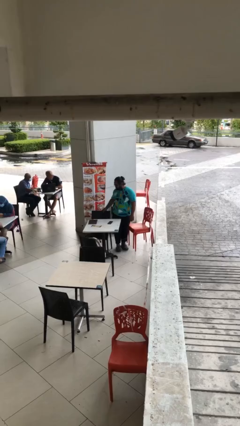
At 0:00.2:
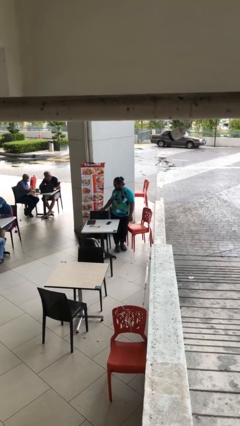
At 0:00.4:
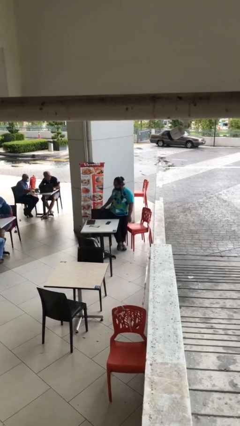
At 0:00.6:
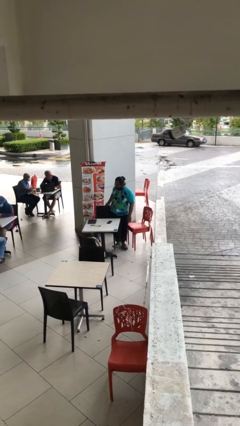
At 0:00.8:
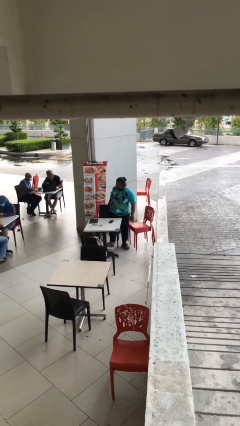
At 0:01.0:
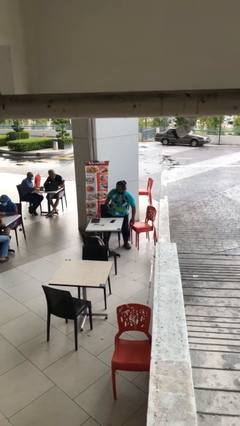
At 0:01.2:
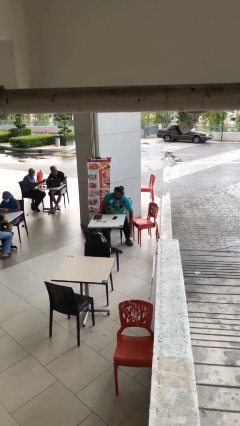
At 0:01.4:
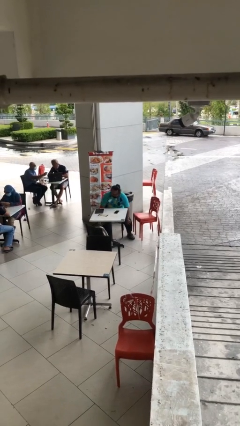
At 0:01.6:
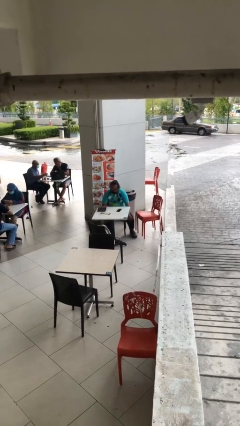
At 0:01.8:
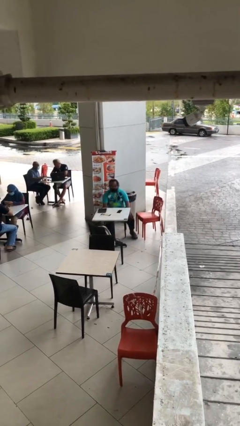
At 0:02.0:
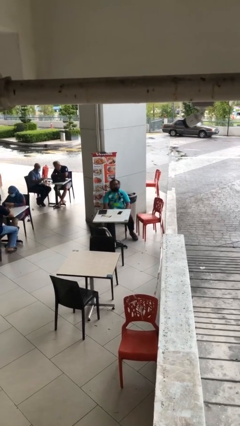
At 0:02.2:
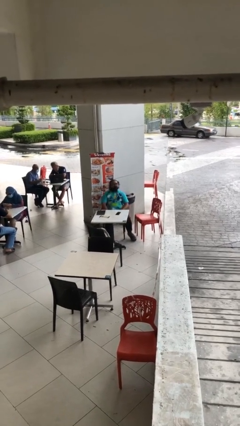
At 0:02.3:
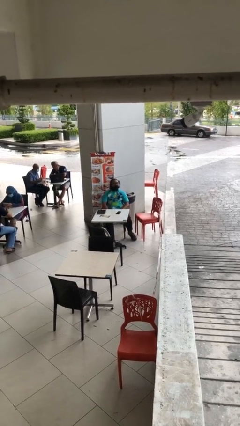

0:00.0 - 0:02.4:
person sits down

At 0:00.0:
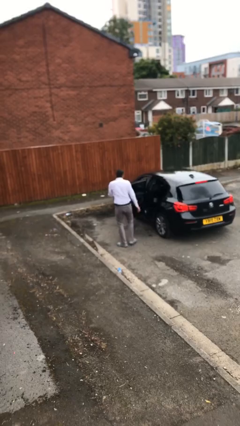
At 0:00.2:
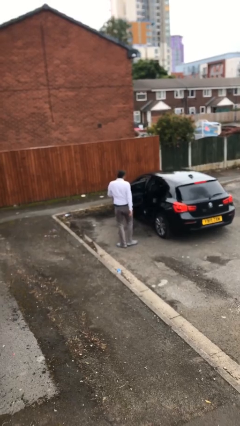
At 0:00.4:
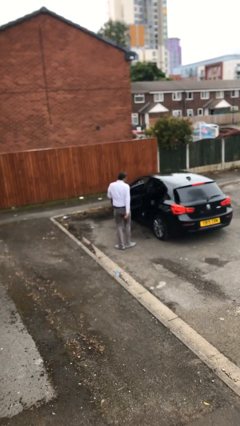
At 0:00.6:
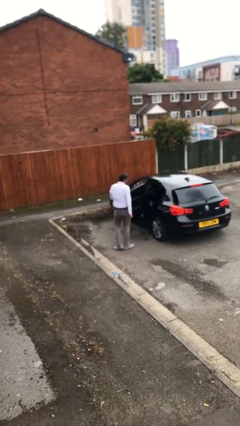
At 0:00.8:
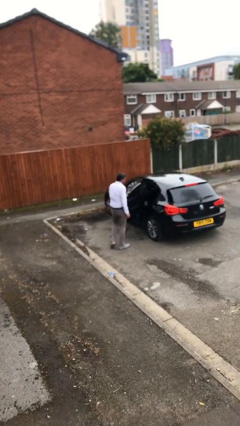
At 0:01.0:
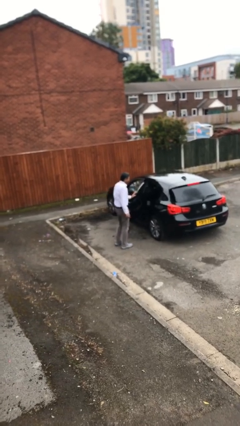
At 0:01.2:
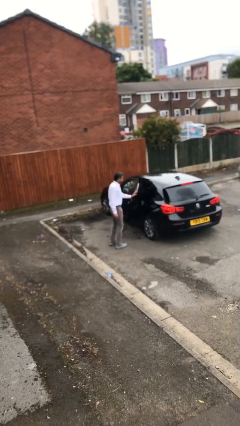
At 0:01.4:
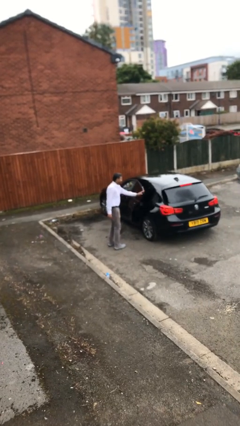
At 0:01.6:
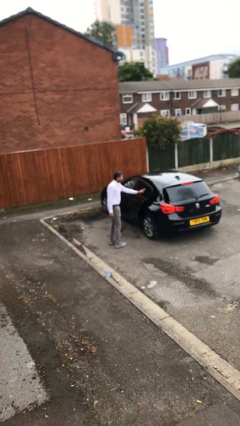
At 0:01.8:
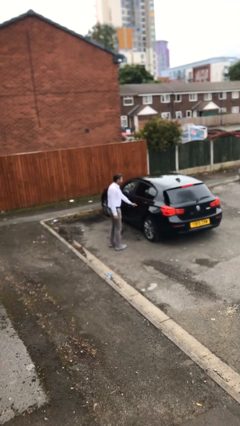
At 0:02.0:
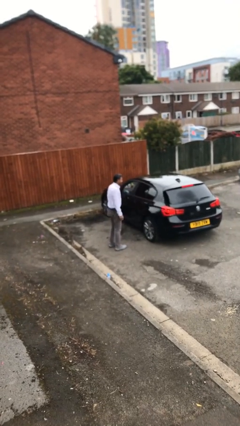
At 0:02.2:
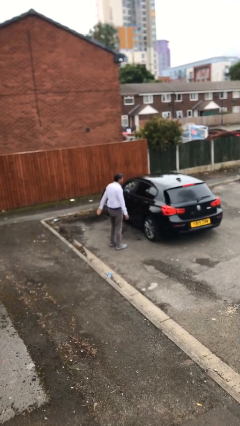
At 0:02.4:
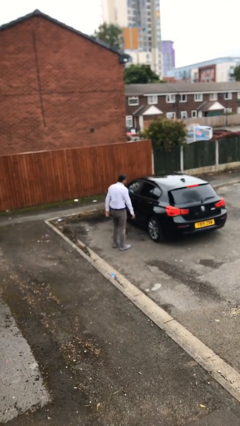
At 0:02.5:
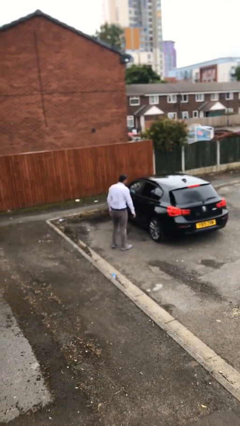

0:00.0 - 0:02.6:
person closes car door

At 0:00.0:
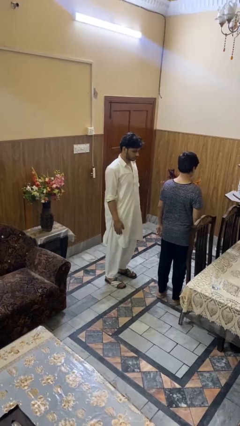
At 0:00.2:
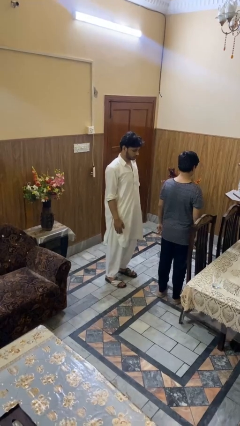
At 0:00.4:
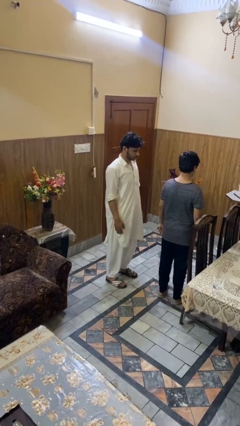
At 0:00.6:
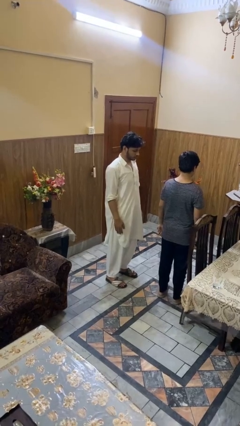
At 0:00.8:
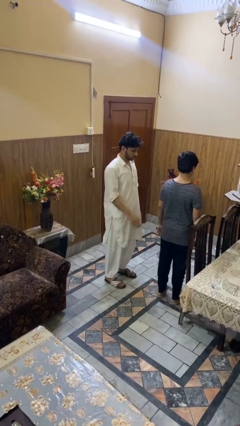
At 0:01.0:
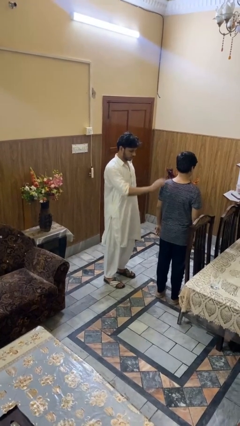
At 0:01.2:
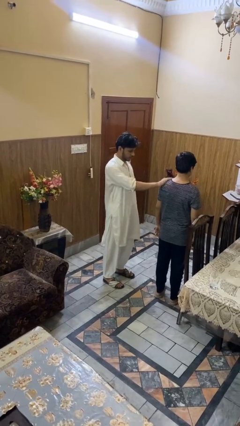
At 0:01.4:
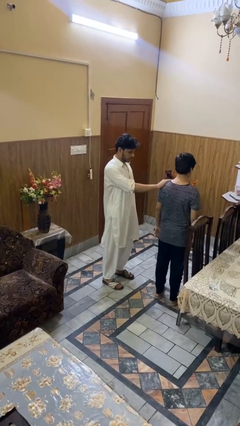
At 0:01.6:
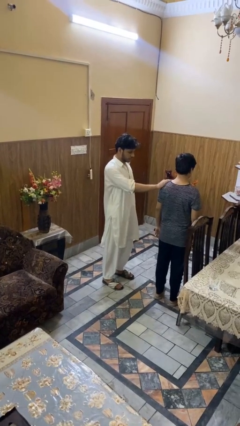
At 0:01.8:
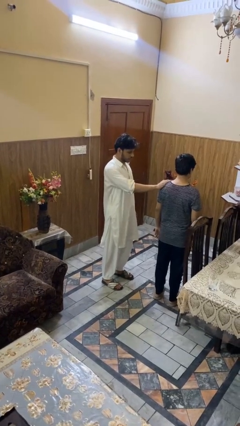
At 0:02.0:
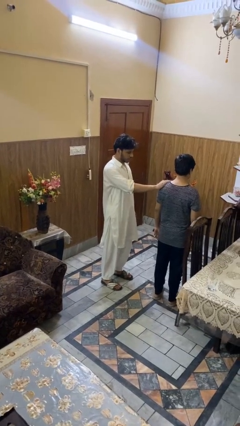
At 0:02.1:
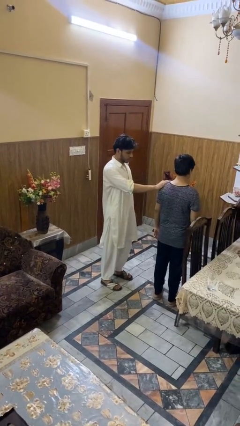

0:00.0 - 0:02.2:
person grabs person by shoulder

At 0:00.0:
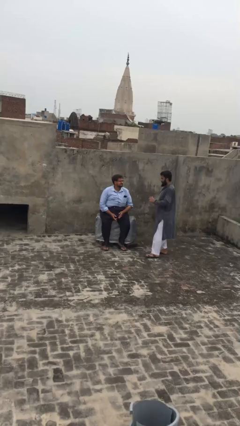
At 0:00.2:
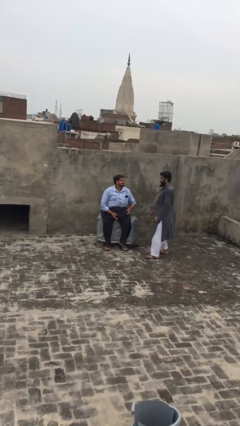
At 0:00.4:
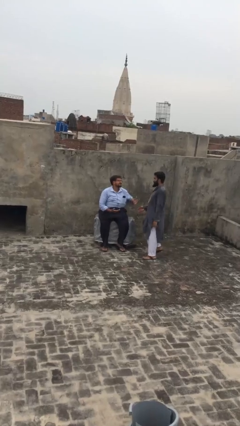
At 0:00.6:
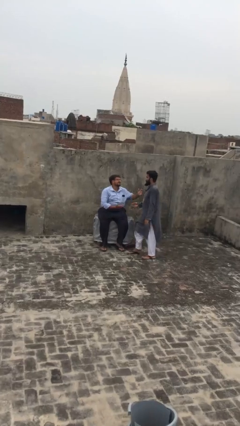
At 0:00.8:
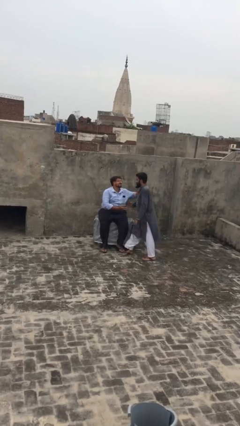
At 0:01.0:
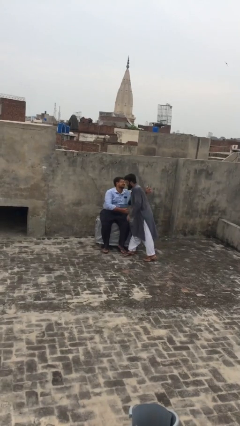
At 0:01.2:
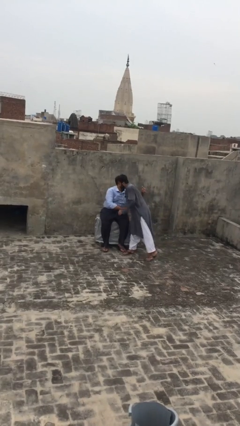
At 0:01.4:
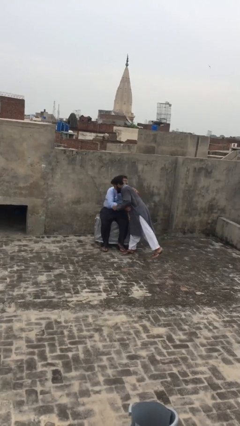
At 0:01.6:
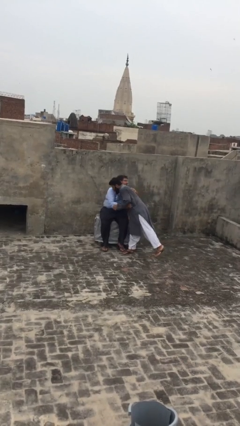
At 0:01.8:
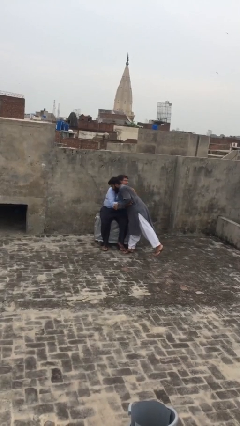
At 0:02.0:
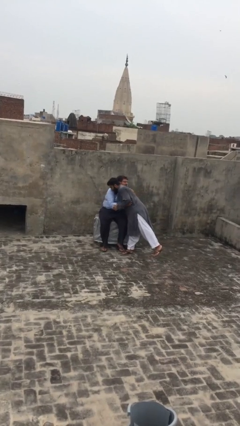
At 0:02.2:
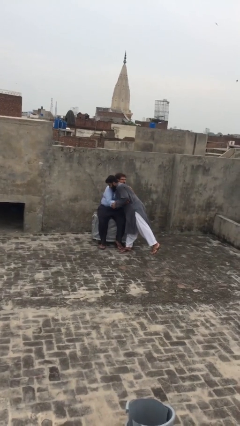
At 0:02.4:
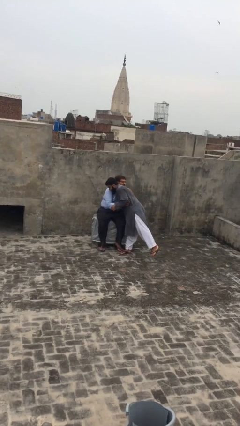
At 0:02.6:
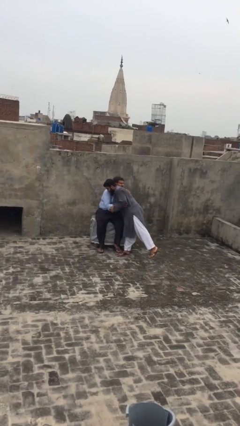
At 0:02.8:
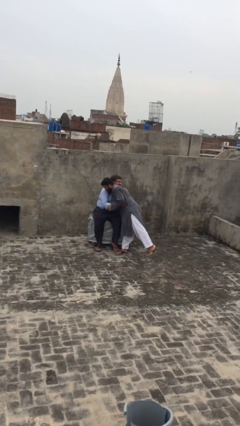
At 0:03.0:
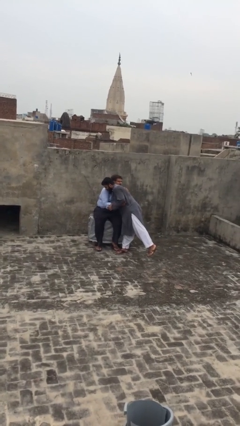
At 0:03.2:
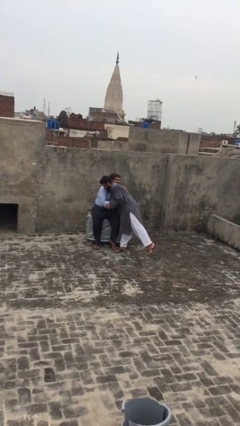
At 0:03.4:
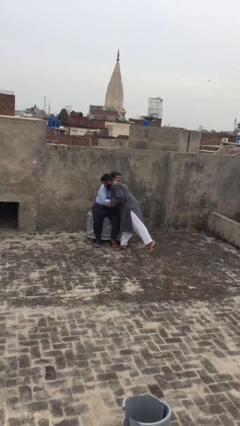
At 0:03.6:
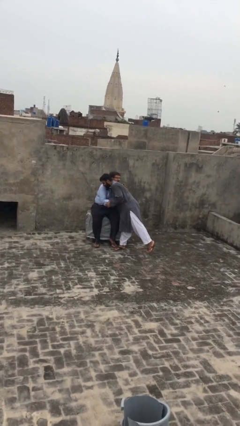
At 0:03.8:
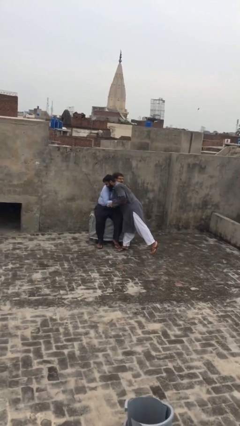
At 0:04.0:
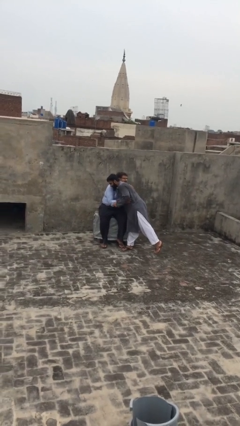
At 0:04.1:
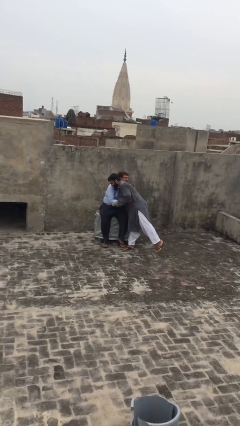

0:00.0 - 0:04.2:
person embraces person

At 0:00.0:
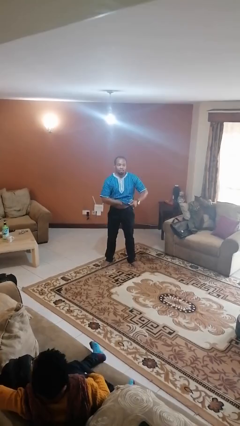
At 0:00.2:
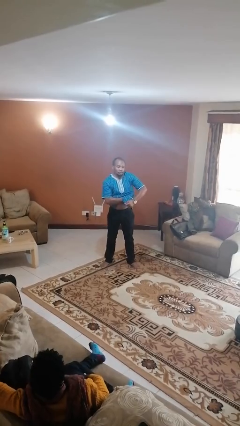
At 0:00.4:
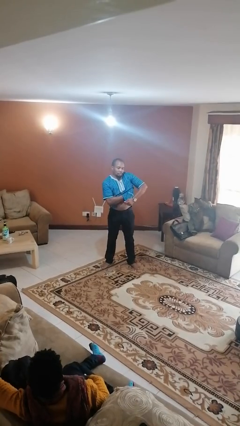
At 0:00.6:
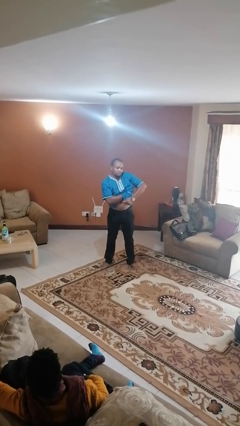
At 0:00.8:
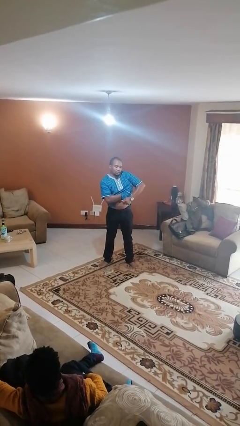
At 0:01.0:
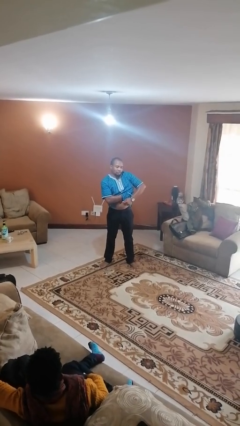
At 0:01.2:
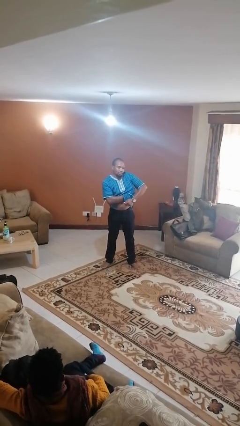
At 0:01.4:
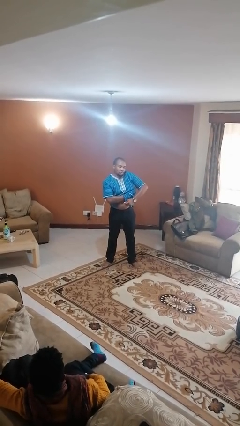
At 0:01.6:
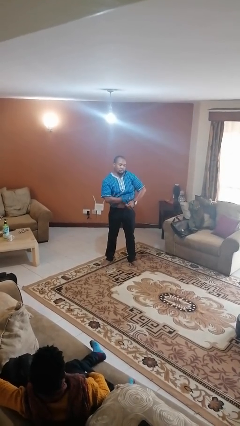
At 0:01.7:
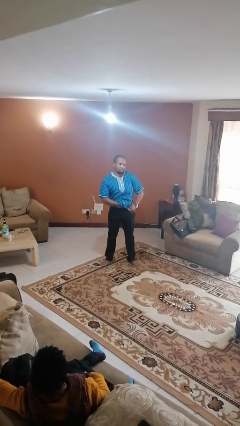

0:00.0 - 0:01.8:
person applies deodorant

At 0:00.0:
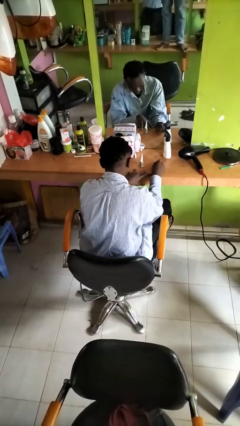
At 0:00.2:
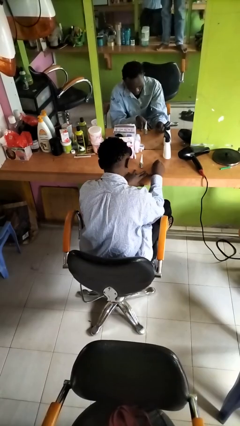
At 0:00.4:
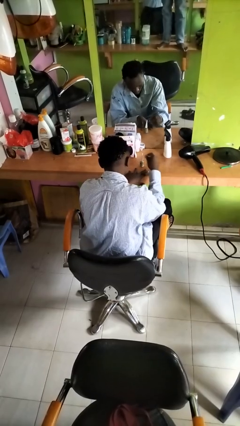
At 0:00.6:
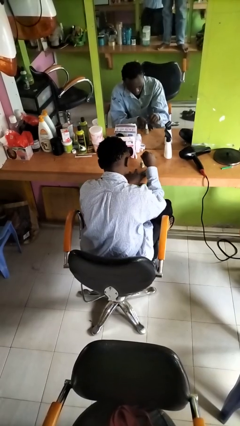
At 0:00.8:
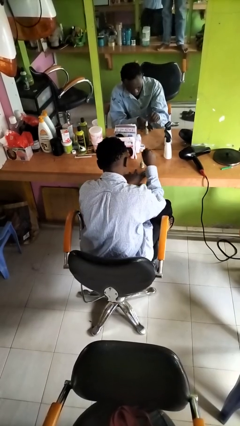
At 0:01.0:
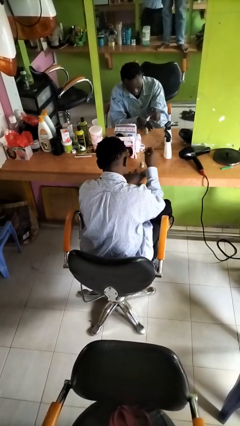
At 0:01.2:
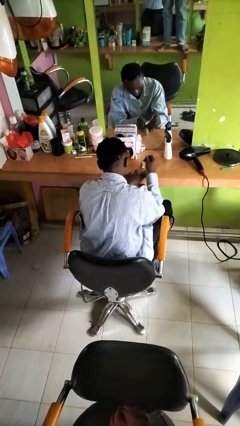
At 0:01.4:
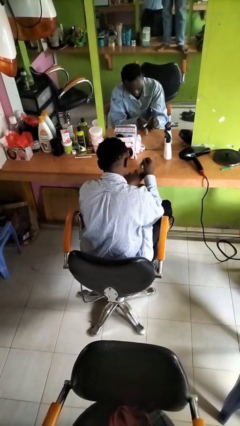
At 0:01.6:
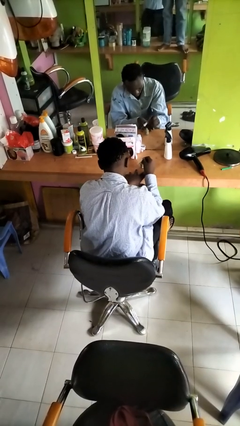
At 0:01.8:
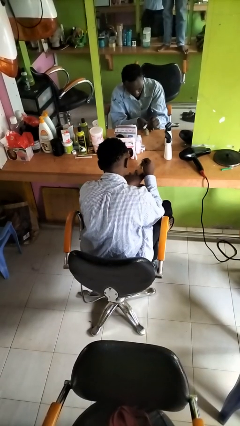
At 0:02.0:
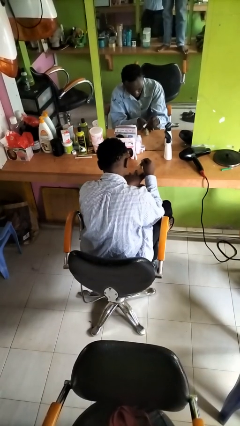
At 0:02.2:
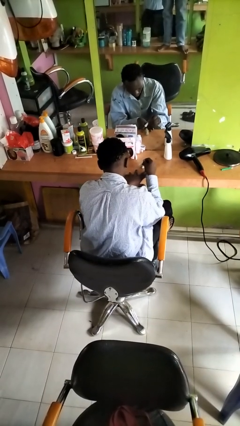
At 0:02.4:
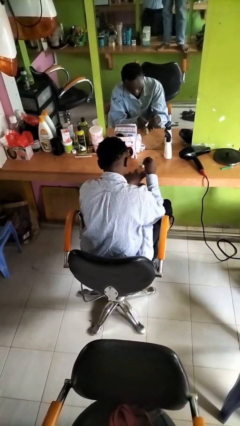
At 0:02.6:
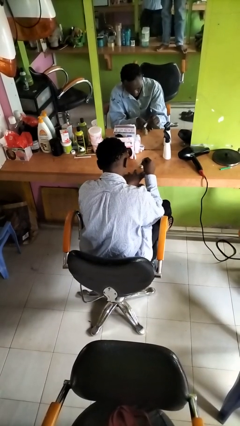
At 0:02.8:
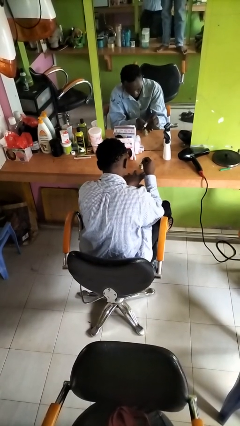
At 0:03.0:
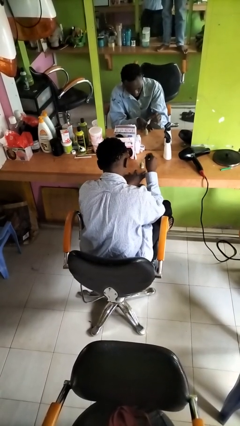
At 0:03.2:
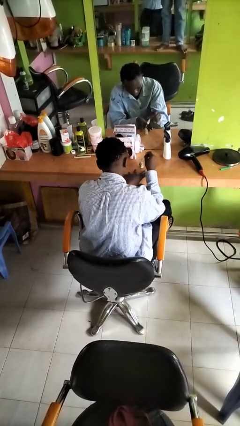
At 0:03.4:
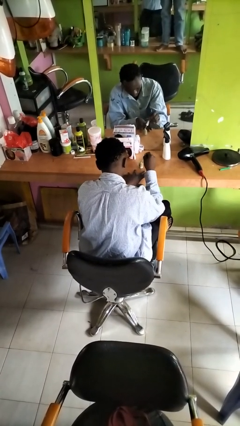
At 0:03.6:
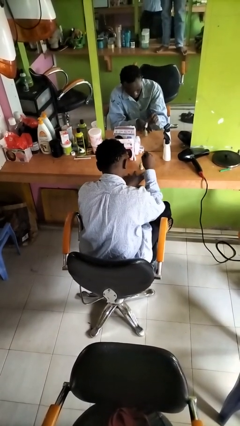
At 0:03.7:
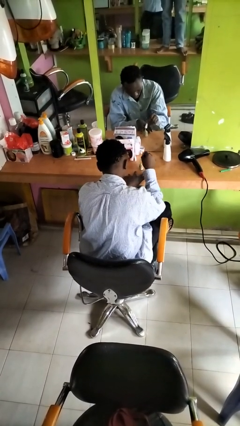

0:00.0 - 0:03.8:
person paints fingernails
